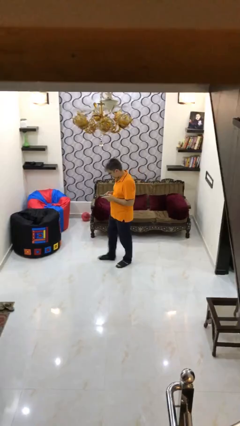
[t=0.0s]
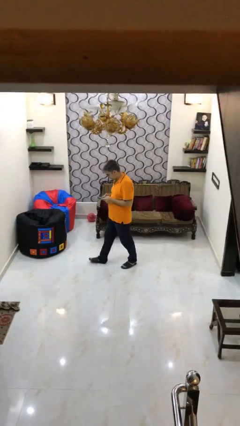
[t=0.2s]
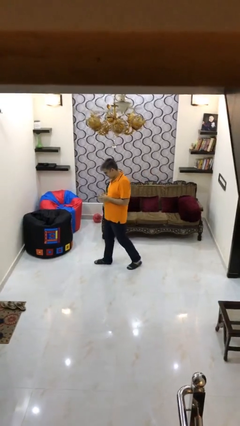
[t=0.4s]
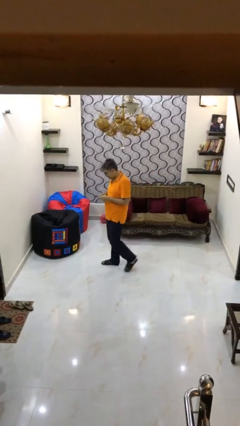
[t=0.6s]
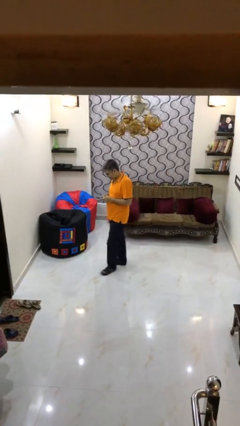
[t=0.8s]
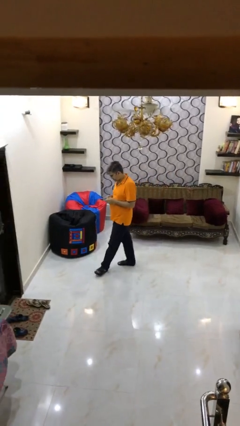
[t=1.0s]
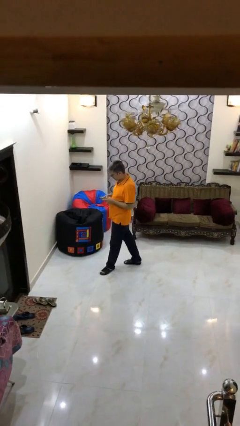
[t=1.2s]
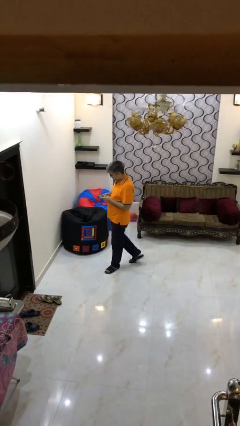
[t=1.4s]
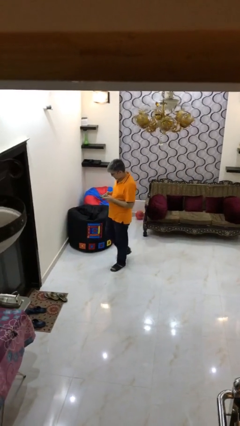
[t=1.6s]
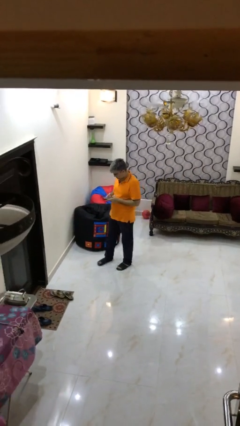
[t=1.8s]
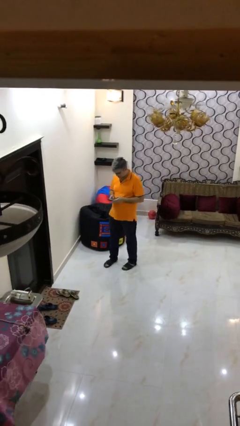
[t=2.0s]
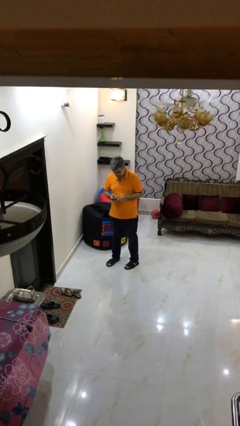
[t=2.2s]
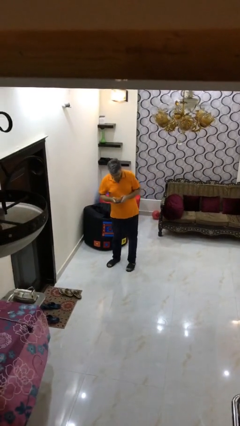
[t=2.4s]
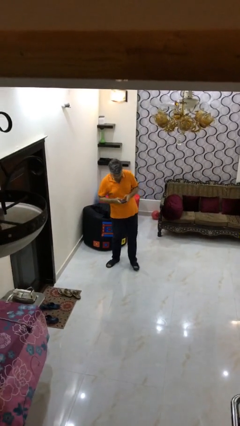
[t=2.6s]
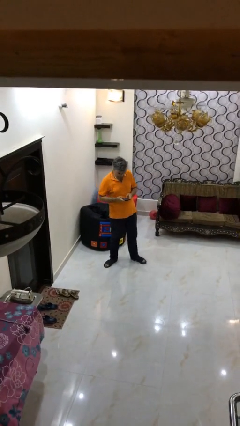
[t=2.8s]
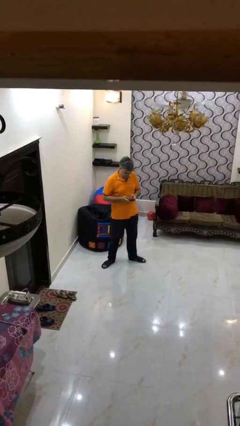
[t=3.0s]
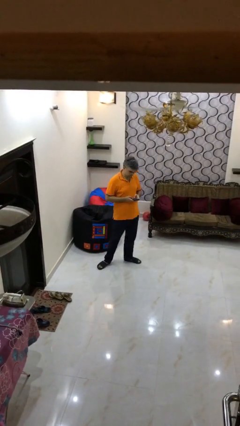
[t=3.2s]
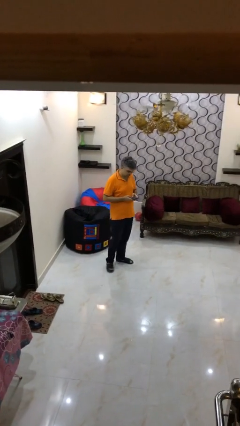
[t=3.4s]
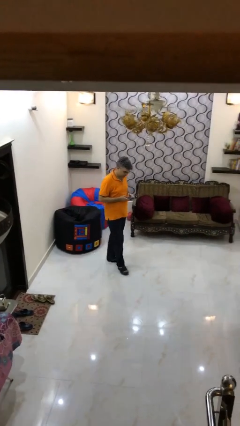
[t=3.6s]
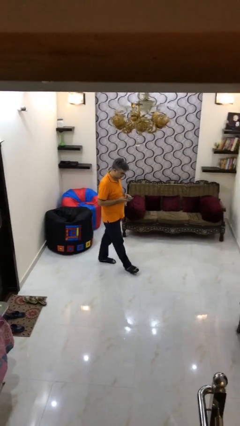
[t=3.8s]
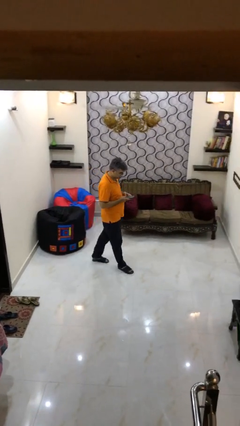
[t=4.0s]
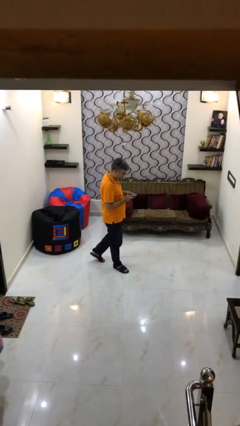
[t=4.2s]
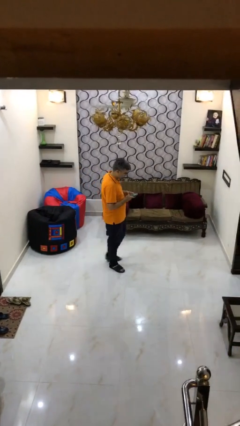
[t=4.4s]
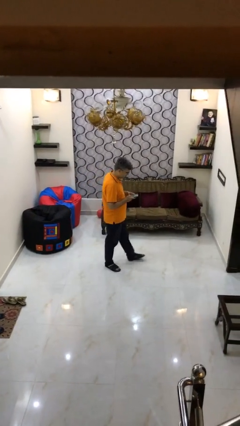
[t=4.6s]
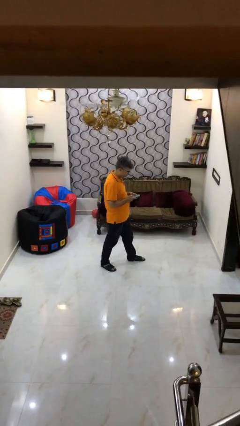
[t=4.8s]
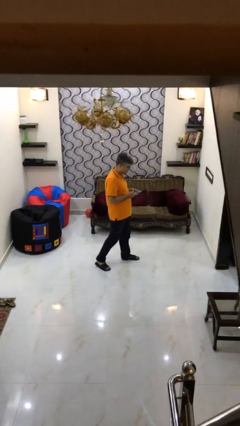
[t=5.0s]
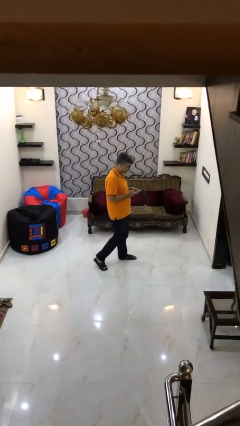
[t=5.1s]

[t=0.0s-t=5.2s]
person texts on phone

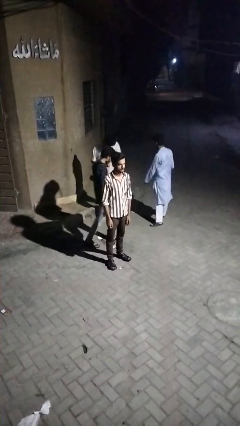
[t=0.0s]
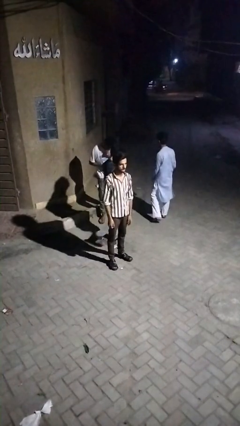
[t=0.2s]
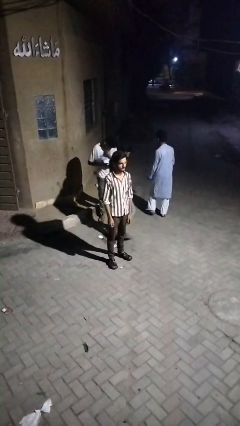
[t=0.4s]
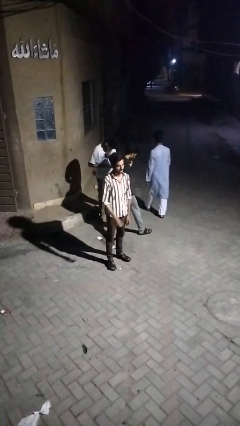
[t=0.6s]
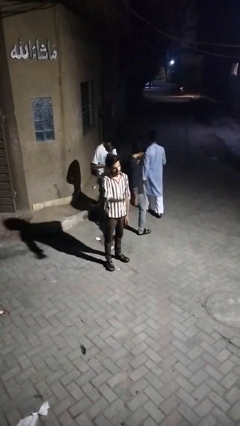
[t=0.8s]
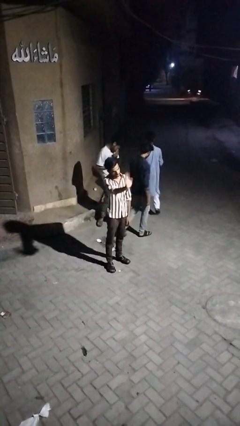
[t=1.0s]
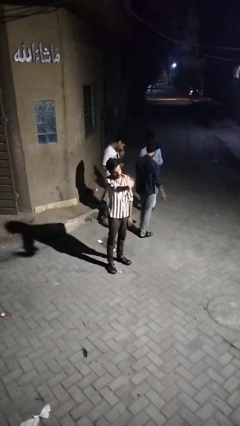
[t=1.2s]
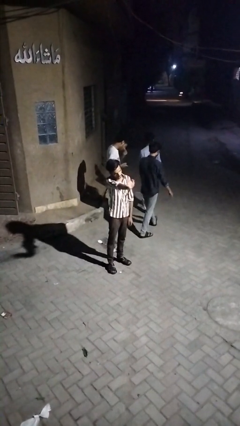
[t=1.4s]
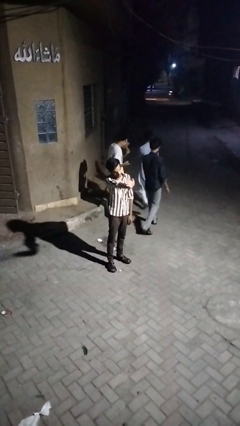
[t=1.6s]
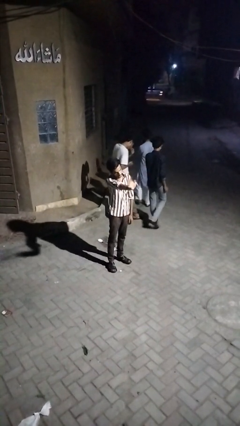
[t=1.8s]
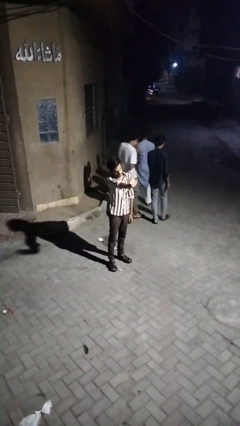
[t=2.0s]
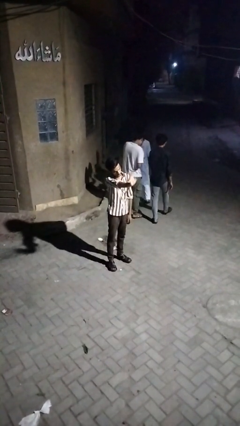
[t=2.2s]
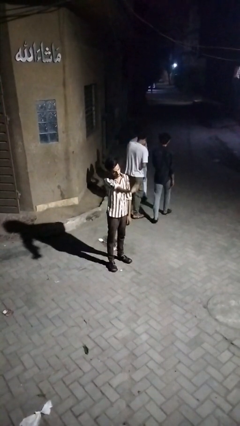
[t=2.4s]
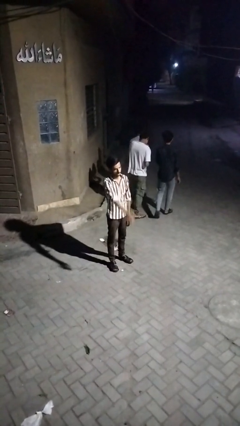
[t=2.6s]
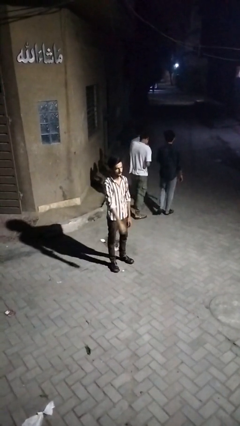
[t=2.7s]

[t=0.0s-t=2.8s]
person waves at person

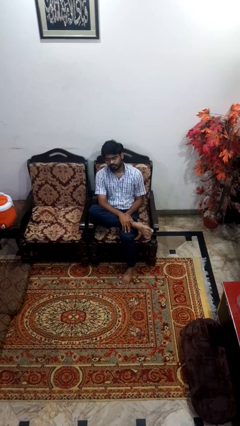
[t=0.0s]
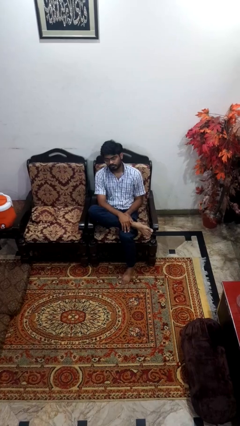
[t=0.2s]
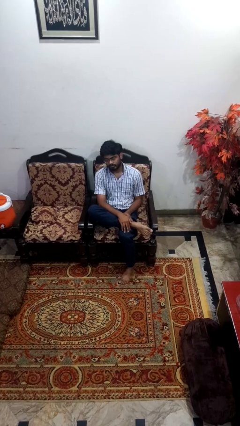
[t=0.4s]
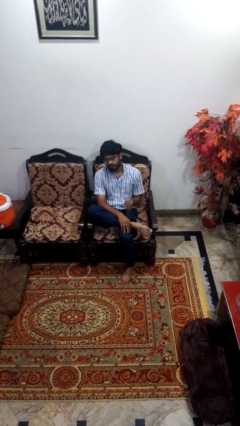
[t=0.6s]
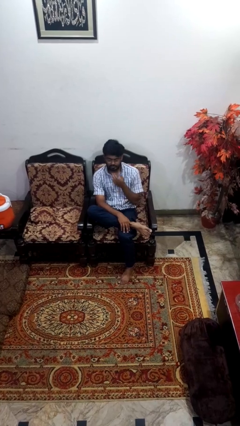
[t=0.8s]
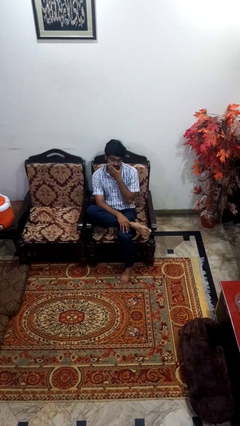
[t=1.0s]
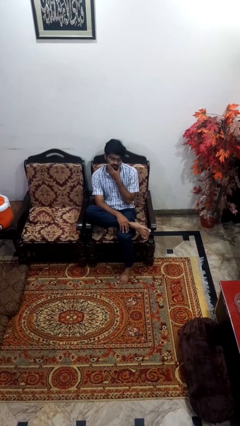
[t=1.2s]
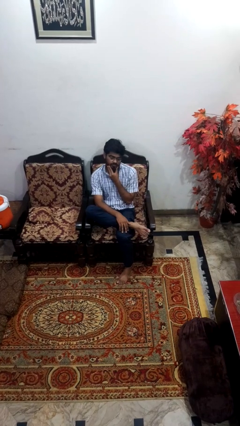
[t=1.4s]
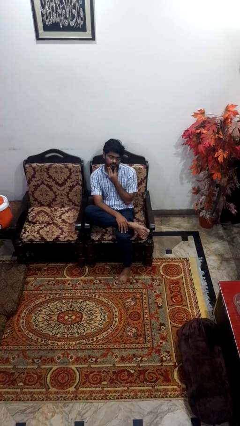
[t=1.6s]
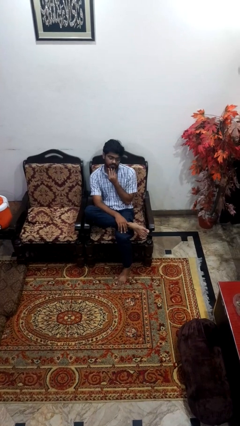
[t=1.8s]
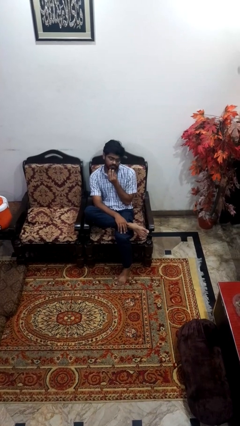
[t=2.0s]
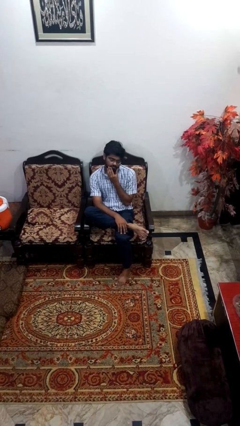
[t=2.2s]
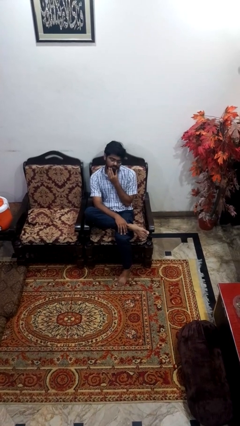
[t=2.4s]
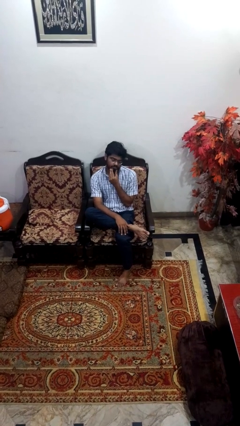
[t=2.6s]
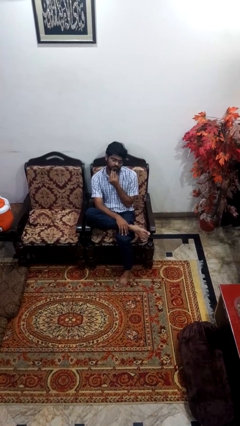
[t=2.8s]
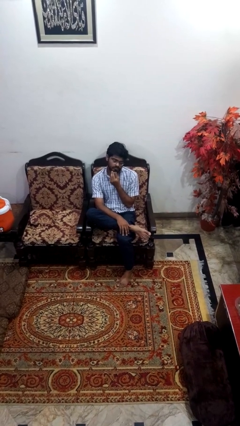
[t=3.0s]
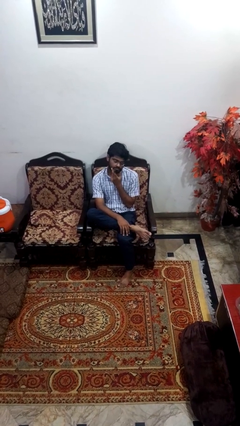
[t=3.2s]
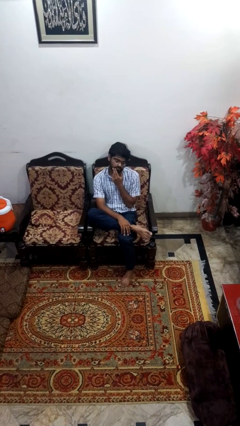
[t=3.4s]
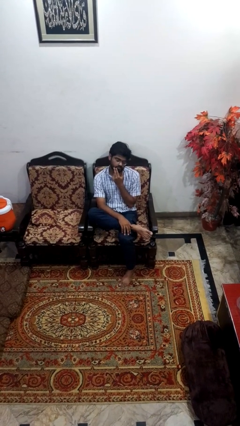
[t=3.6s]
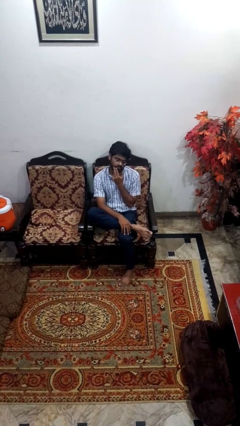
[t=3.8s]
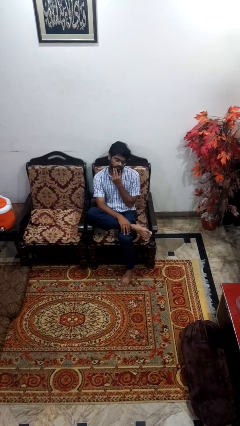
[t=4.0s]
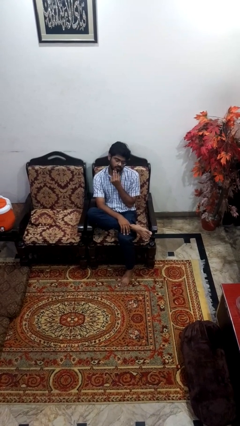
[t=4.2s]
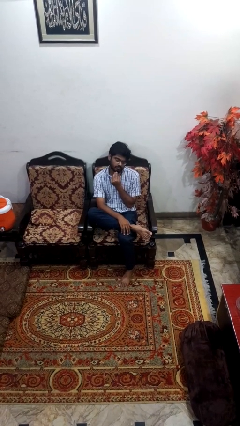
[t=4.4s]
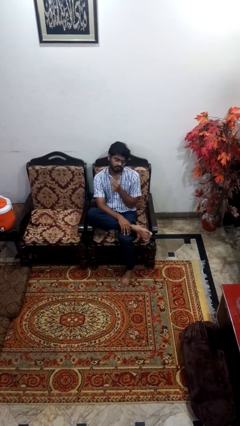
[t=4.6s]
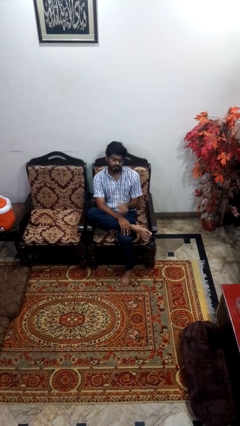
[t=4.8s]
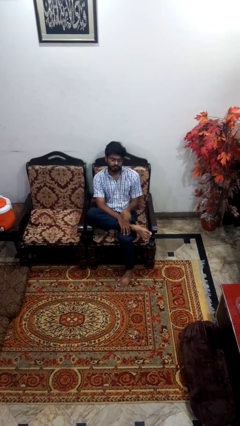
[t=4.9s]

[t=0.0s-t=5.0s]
person strokes chin

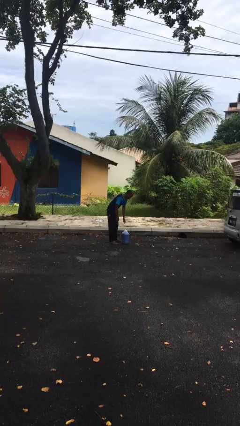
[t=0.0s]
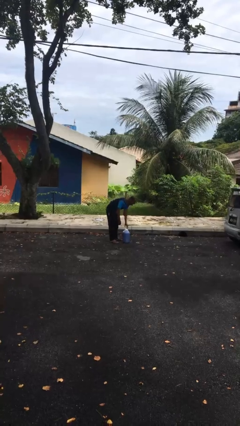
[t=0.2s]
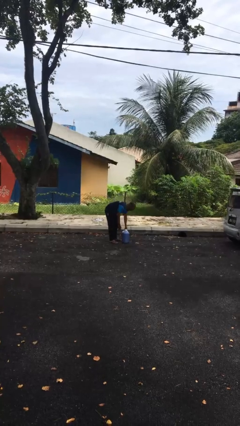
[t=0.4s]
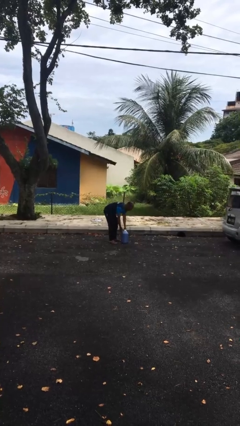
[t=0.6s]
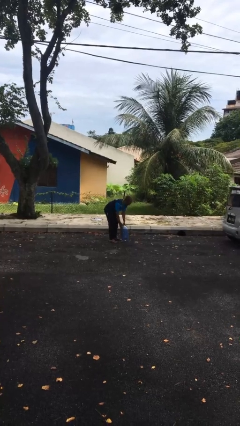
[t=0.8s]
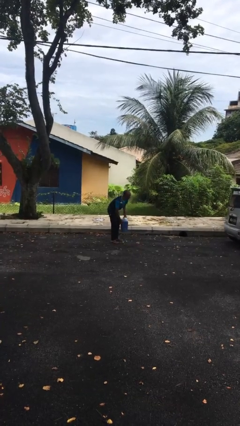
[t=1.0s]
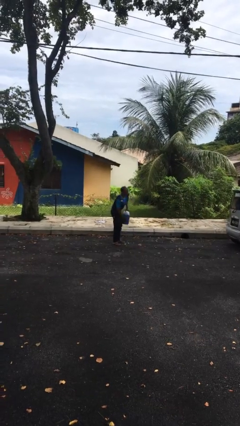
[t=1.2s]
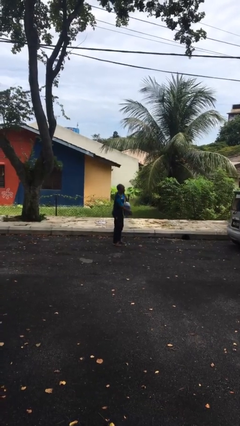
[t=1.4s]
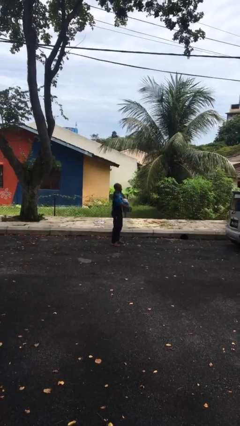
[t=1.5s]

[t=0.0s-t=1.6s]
person picks up object from floor

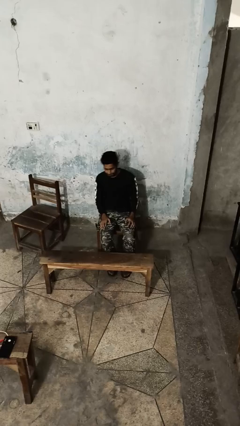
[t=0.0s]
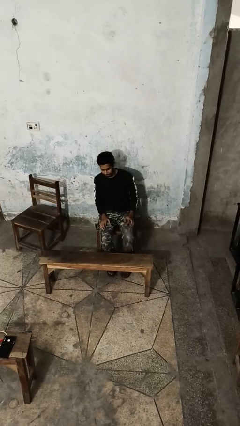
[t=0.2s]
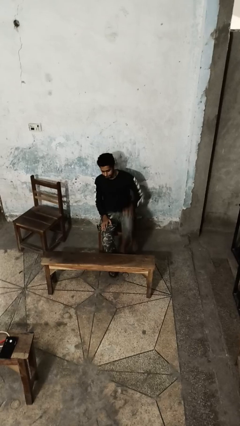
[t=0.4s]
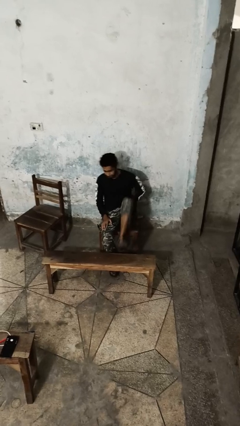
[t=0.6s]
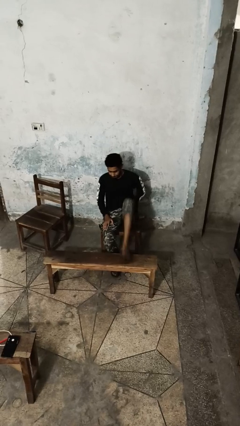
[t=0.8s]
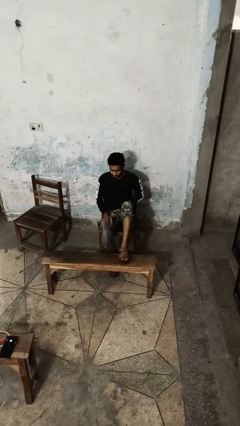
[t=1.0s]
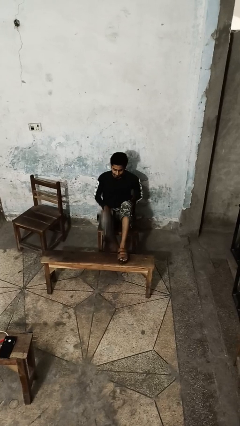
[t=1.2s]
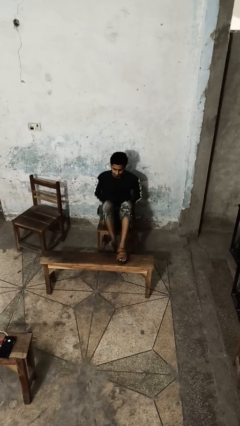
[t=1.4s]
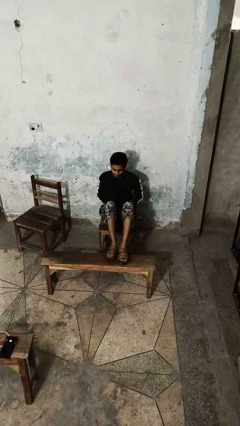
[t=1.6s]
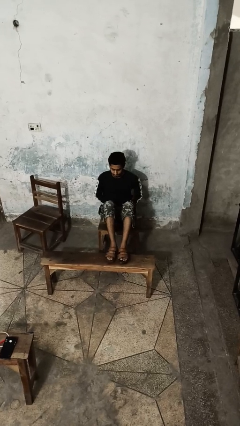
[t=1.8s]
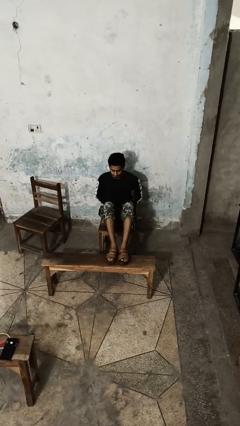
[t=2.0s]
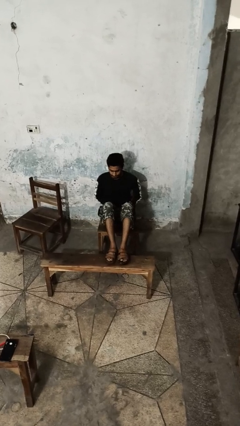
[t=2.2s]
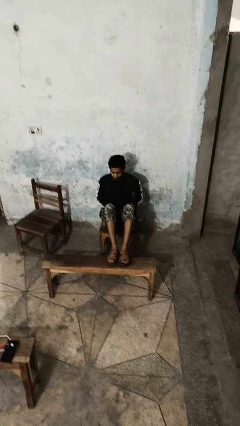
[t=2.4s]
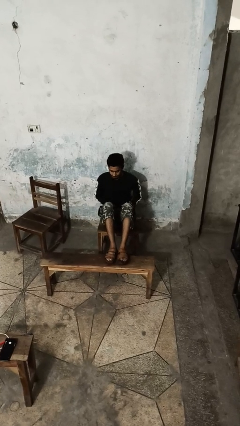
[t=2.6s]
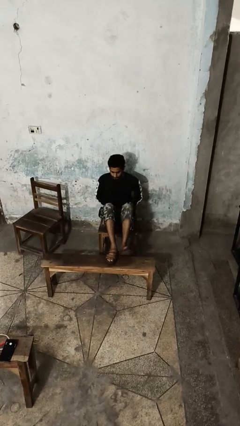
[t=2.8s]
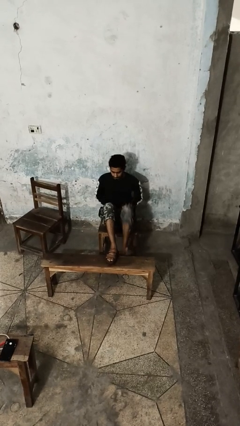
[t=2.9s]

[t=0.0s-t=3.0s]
person puts feet up
